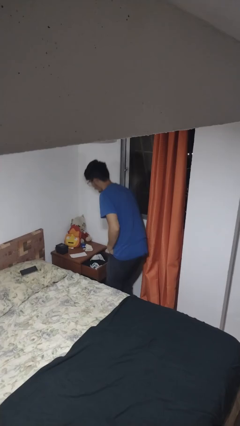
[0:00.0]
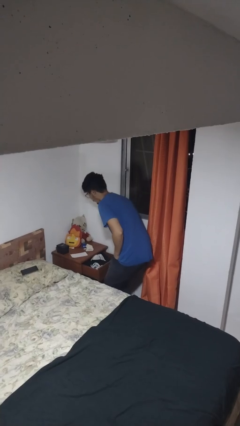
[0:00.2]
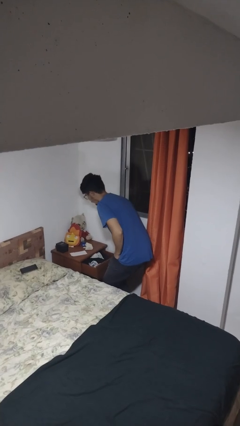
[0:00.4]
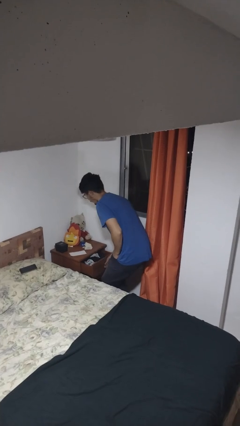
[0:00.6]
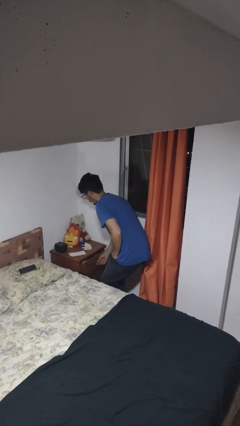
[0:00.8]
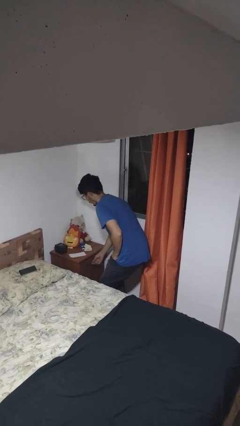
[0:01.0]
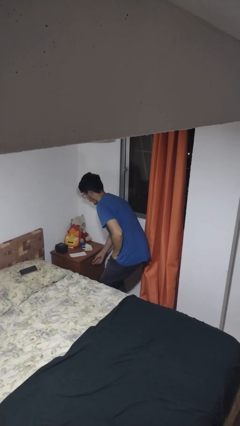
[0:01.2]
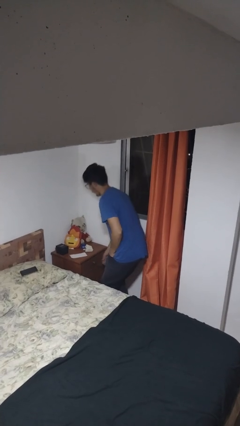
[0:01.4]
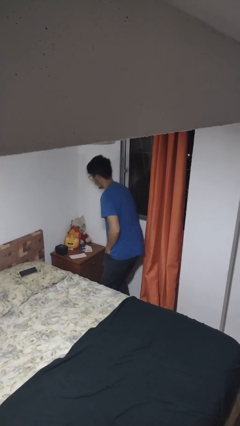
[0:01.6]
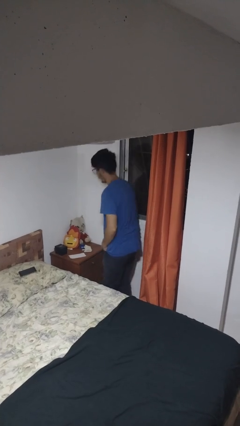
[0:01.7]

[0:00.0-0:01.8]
person closes dresser drawer

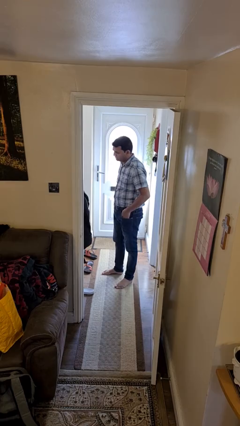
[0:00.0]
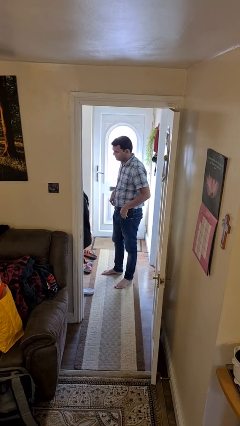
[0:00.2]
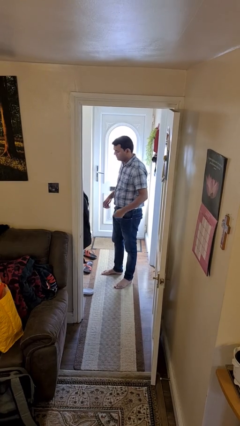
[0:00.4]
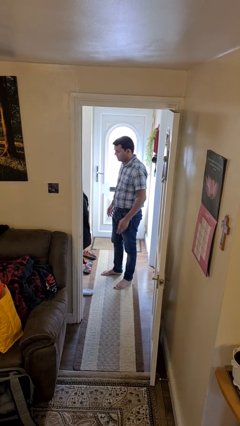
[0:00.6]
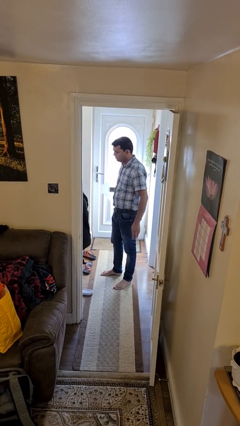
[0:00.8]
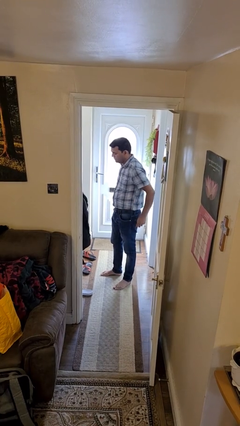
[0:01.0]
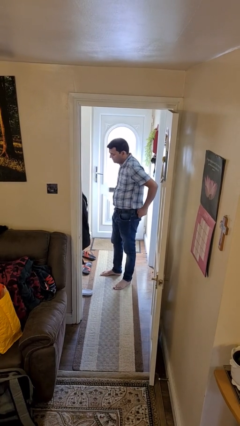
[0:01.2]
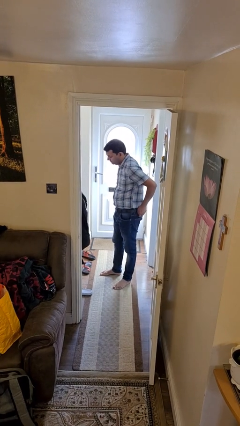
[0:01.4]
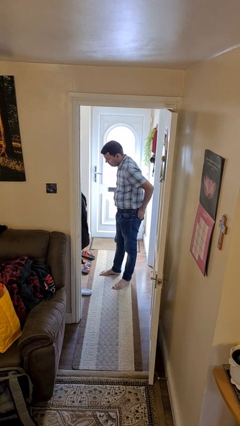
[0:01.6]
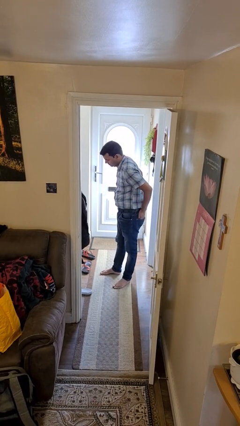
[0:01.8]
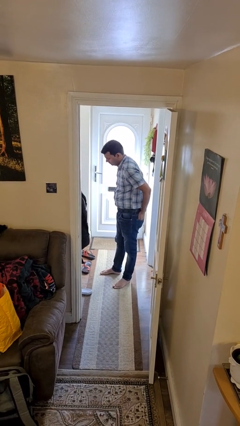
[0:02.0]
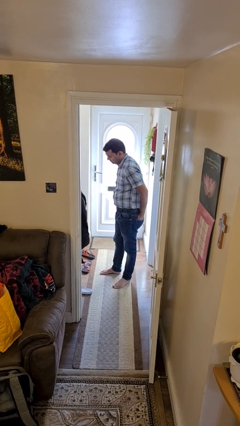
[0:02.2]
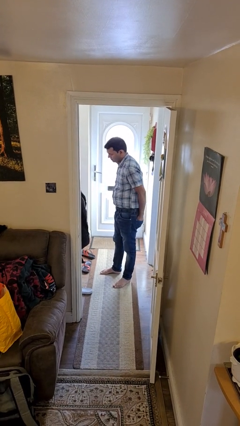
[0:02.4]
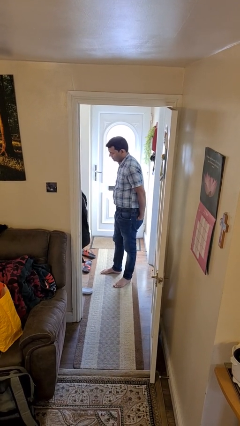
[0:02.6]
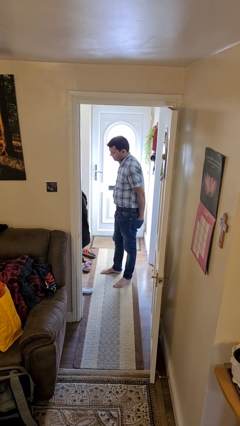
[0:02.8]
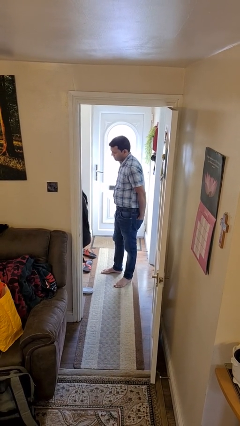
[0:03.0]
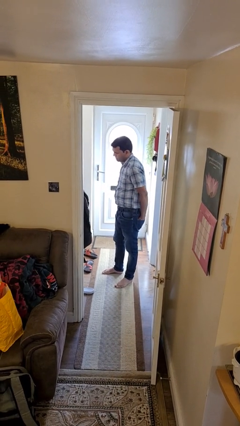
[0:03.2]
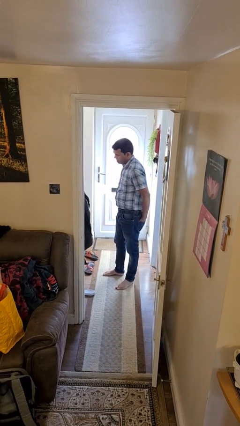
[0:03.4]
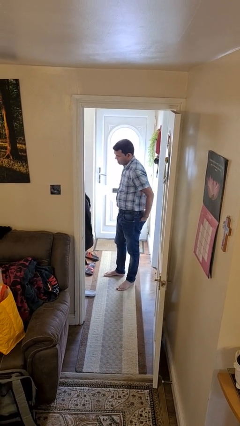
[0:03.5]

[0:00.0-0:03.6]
person puts hands in back pockets

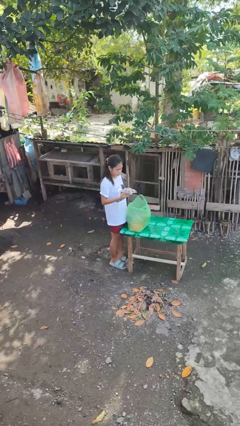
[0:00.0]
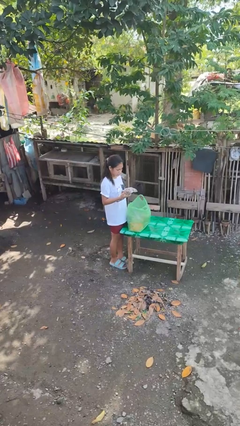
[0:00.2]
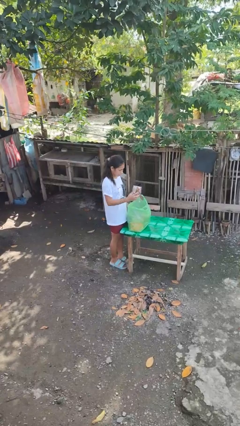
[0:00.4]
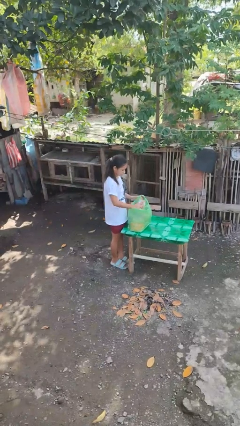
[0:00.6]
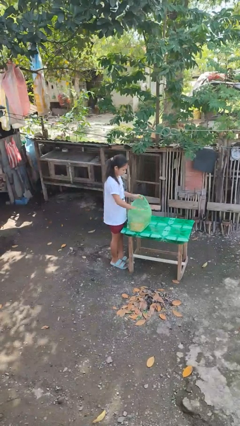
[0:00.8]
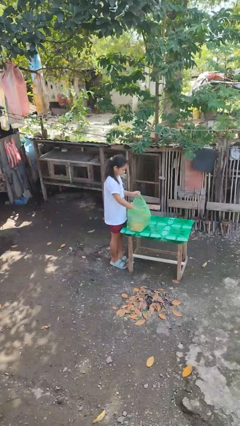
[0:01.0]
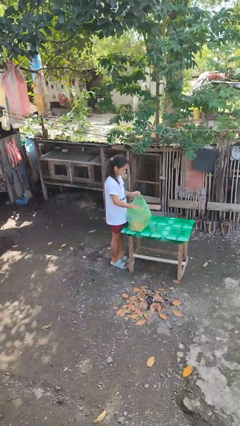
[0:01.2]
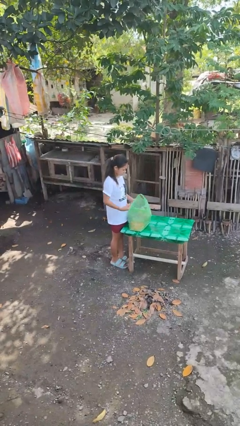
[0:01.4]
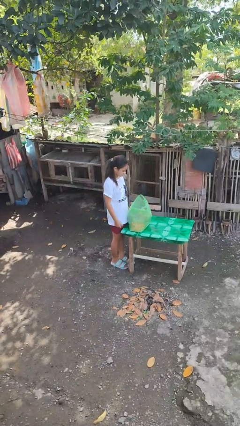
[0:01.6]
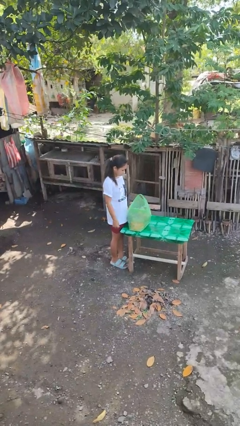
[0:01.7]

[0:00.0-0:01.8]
person puts object into bag

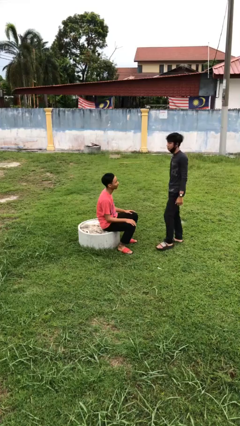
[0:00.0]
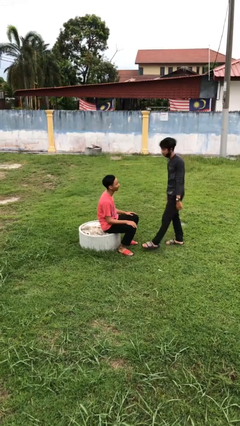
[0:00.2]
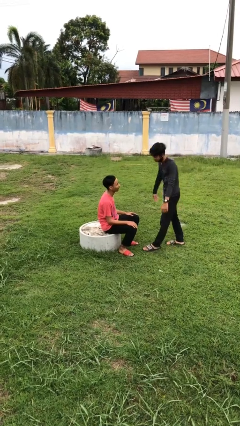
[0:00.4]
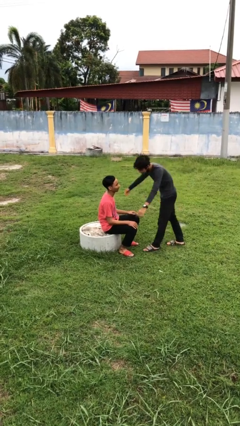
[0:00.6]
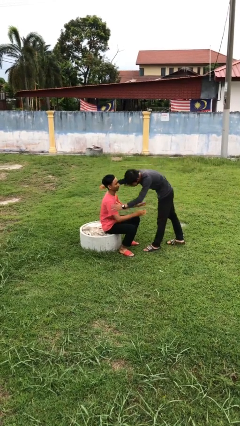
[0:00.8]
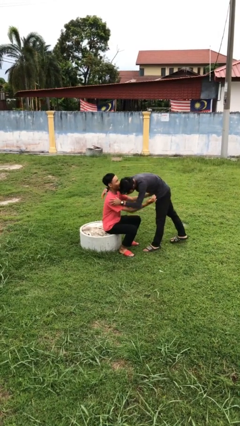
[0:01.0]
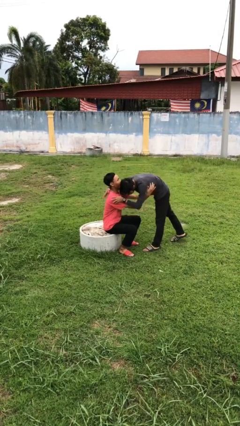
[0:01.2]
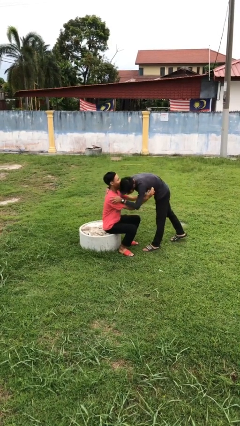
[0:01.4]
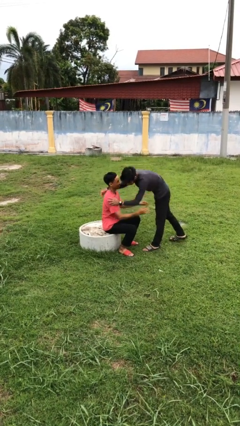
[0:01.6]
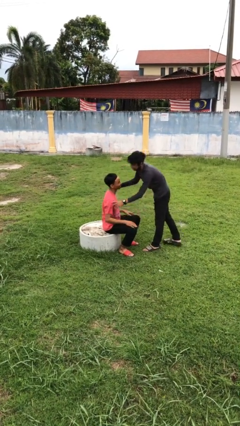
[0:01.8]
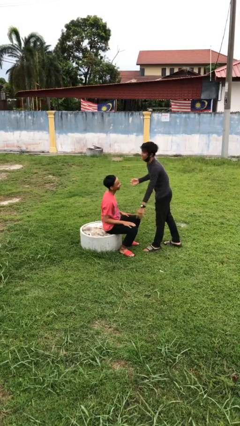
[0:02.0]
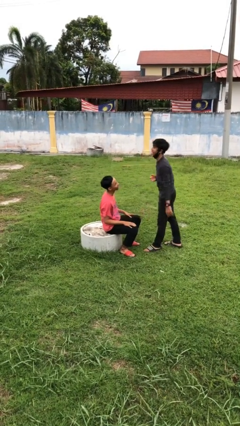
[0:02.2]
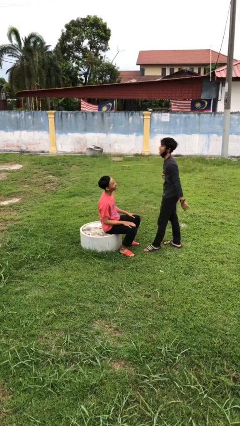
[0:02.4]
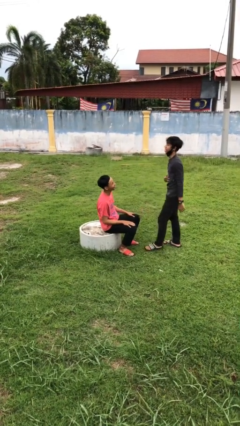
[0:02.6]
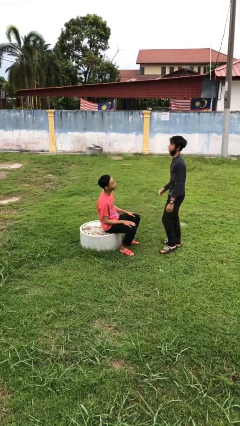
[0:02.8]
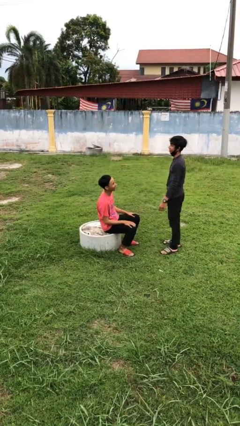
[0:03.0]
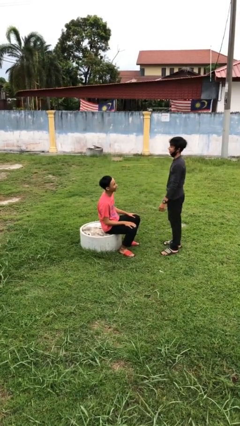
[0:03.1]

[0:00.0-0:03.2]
person embraces person

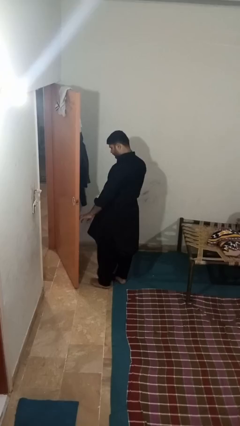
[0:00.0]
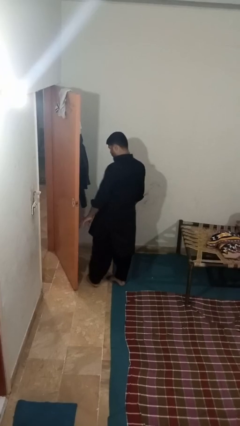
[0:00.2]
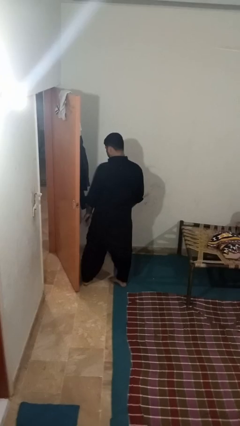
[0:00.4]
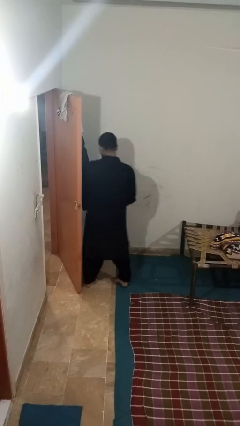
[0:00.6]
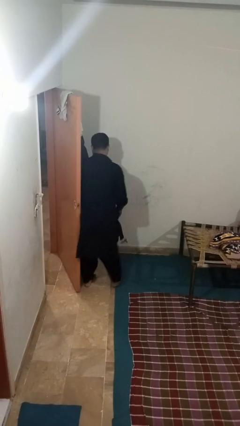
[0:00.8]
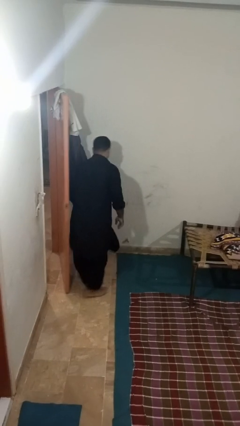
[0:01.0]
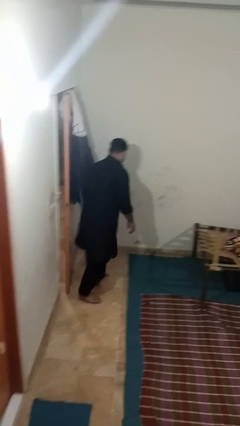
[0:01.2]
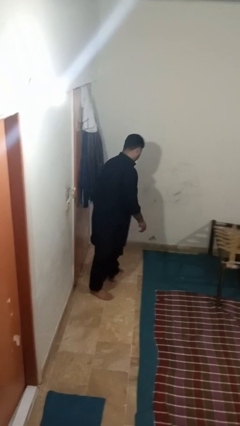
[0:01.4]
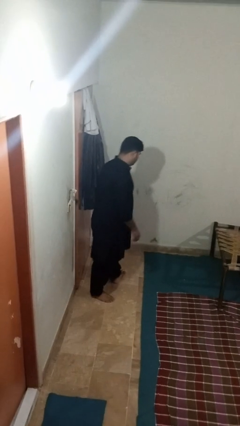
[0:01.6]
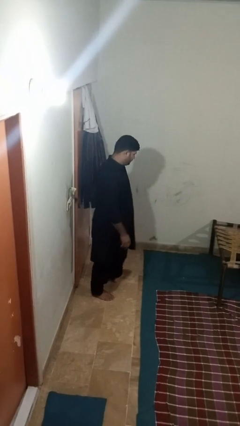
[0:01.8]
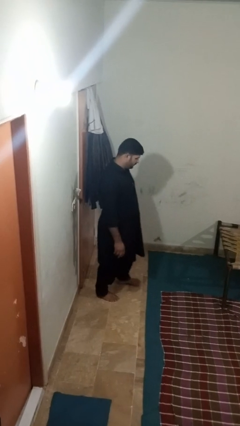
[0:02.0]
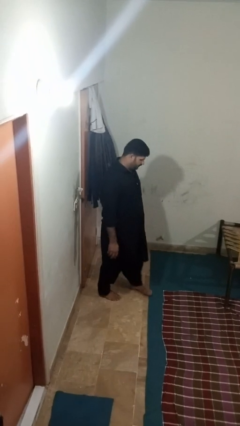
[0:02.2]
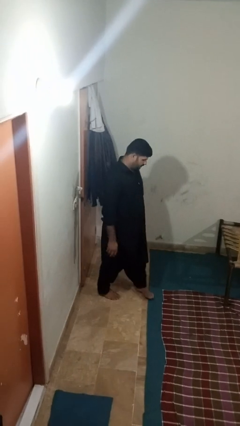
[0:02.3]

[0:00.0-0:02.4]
person closes door with hip

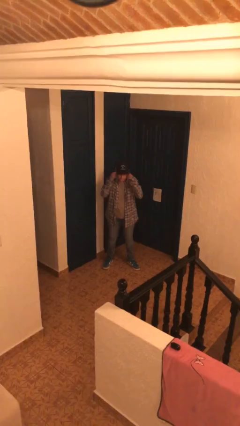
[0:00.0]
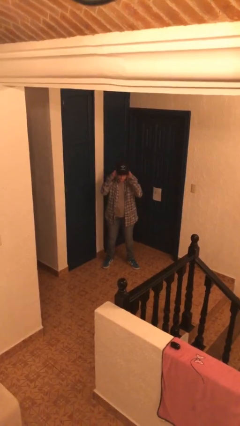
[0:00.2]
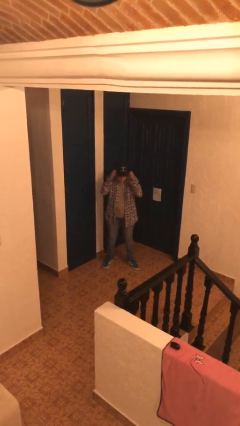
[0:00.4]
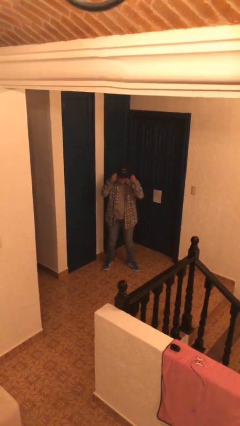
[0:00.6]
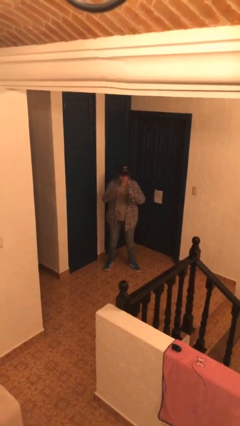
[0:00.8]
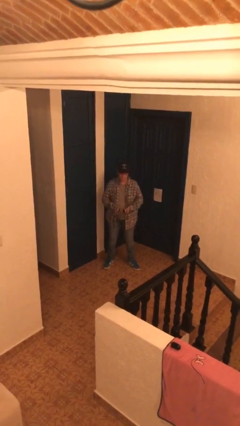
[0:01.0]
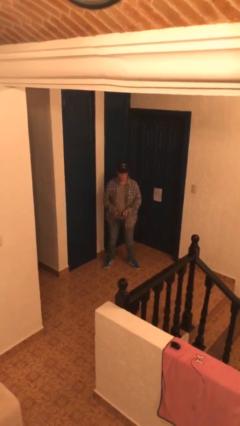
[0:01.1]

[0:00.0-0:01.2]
person takes off headphones

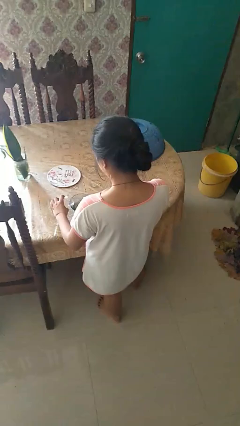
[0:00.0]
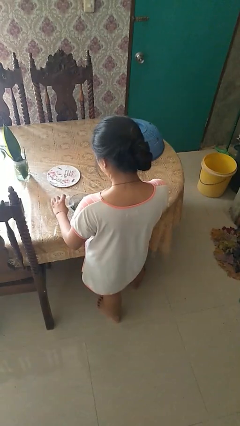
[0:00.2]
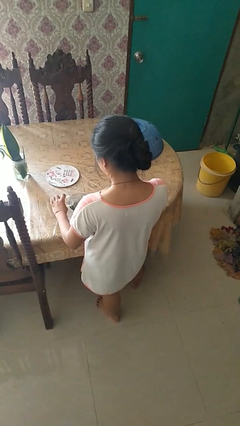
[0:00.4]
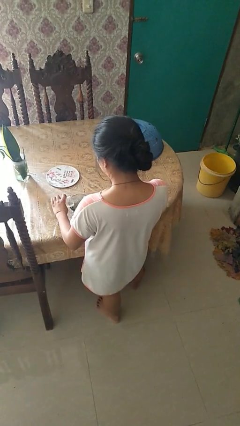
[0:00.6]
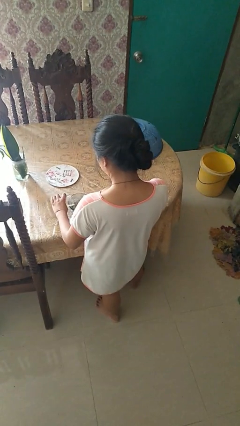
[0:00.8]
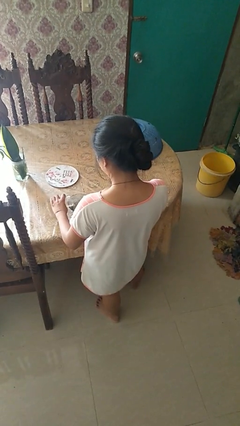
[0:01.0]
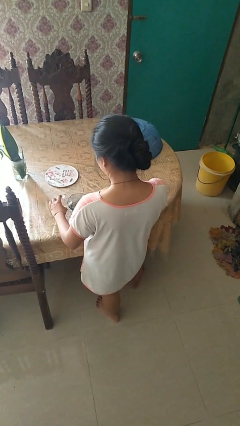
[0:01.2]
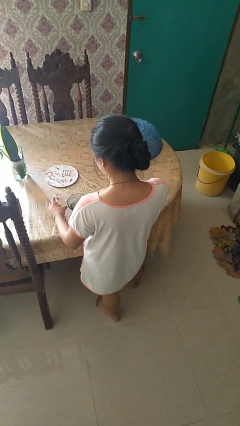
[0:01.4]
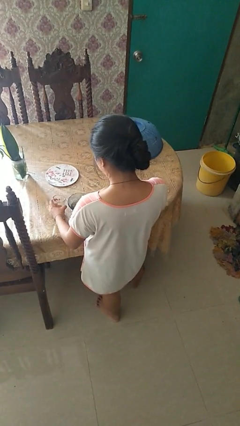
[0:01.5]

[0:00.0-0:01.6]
person pours into bowl

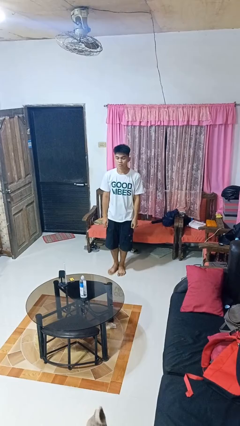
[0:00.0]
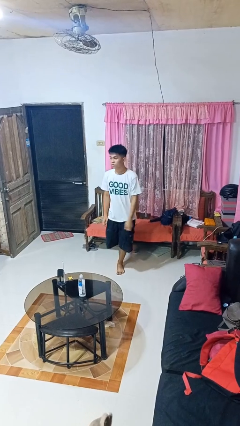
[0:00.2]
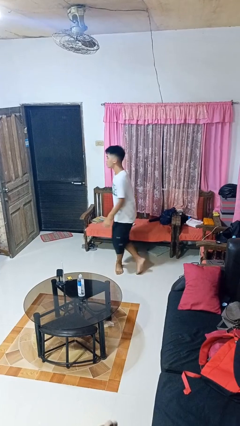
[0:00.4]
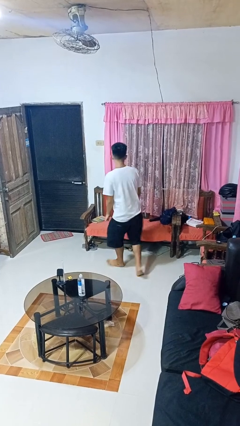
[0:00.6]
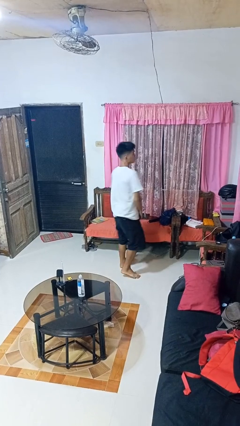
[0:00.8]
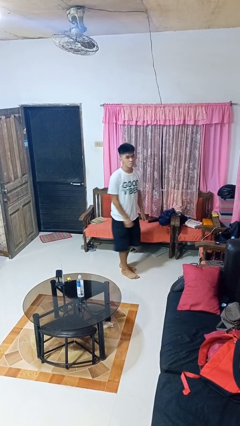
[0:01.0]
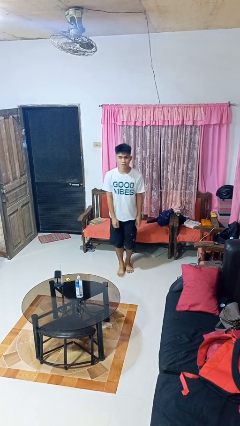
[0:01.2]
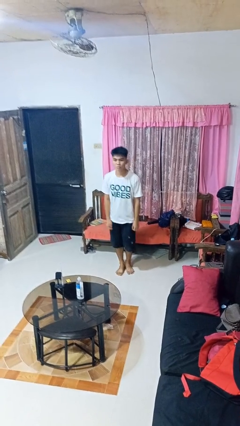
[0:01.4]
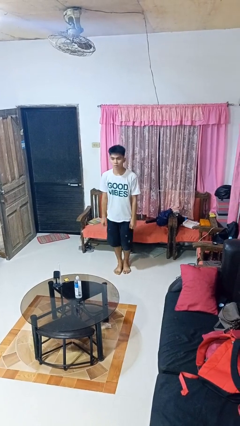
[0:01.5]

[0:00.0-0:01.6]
person twirls
